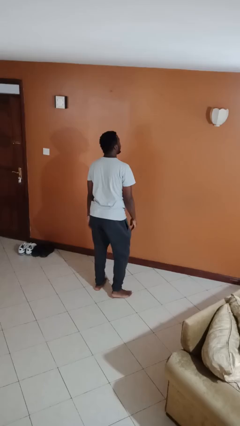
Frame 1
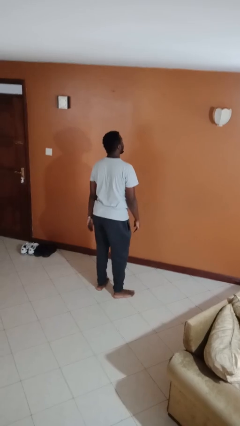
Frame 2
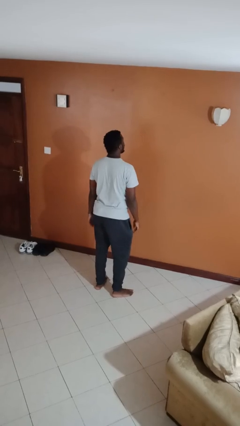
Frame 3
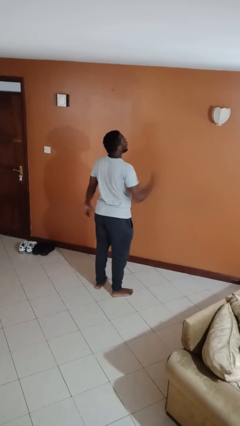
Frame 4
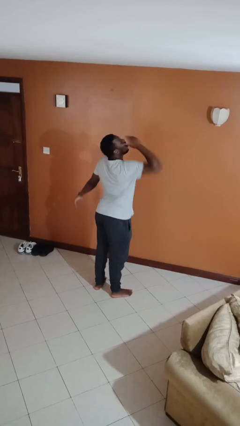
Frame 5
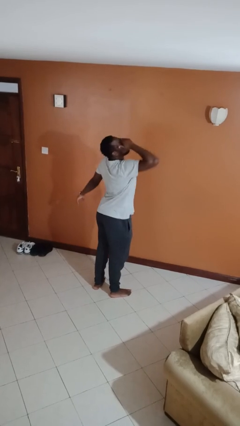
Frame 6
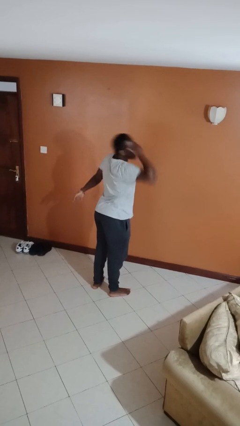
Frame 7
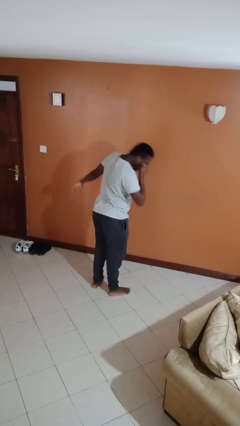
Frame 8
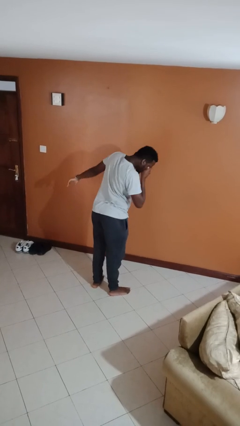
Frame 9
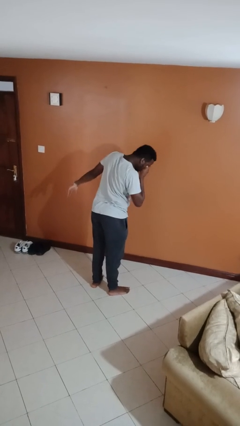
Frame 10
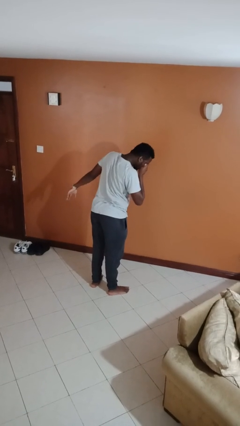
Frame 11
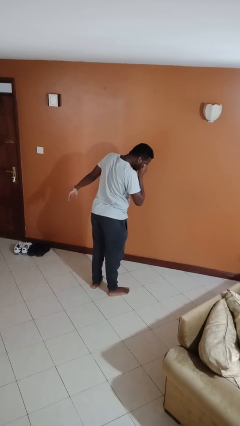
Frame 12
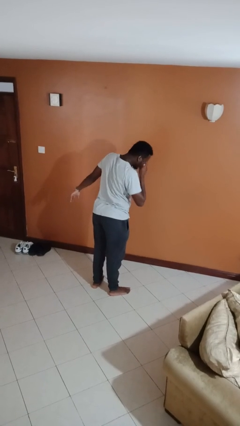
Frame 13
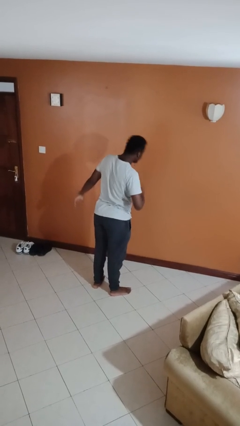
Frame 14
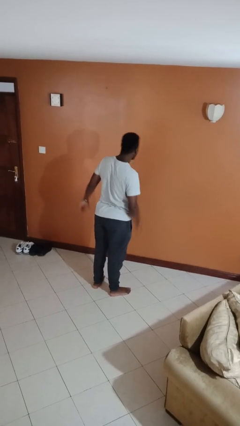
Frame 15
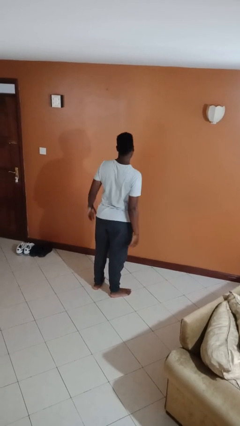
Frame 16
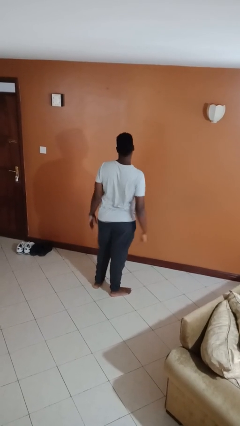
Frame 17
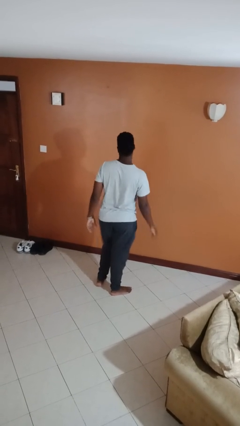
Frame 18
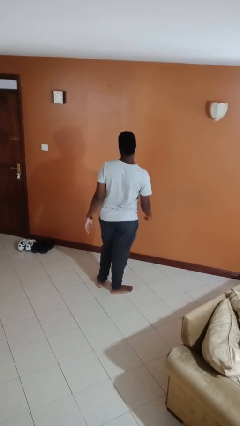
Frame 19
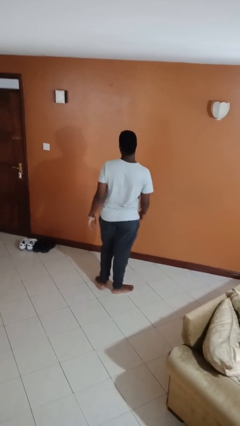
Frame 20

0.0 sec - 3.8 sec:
person sneezes into hand

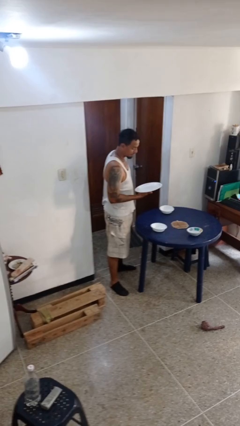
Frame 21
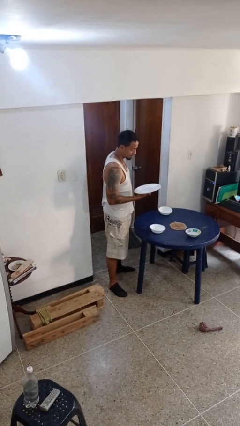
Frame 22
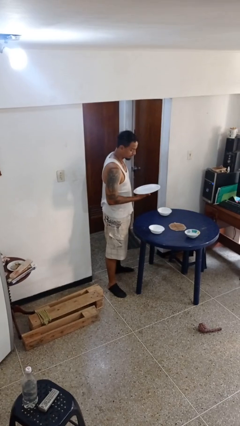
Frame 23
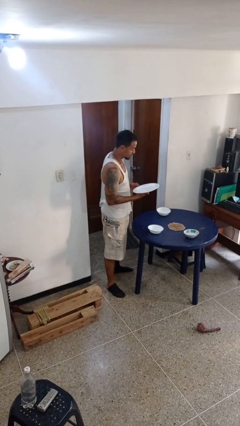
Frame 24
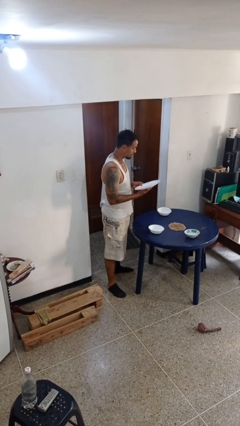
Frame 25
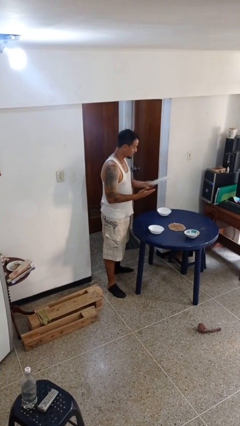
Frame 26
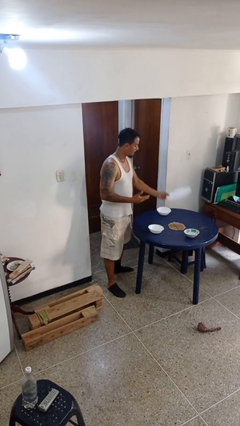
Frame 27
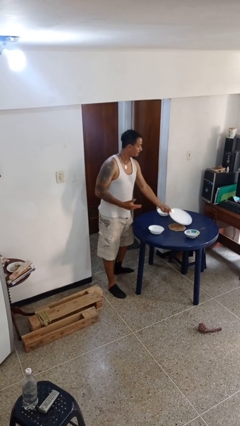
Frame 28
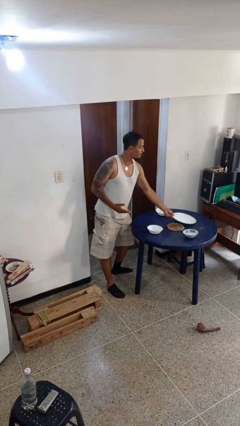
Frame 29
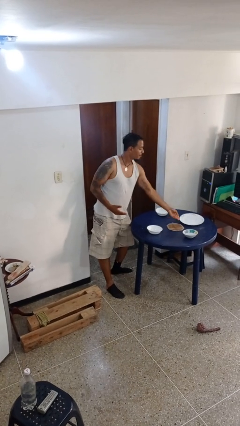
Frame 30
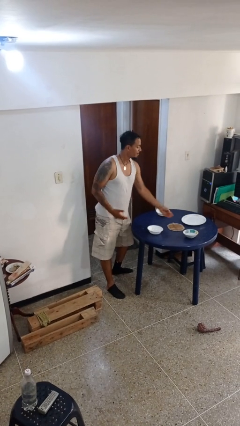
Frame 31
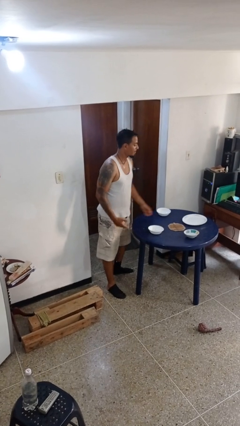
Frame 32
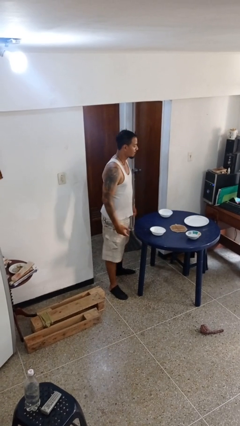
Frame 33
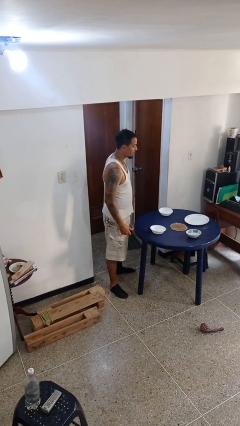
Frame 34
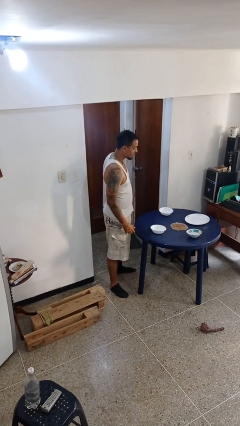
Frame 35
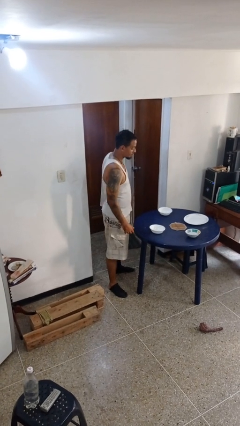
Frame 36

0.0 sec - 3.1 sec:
person sets table

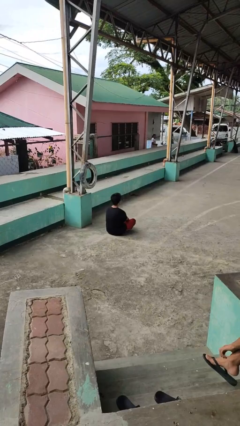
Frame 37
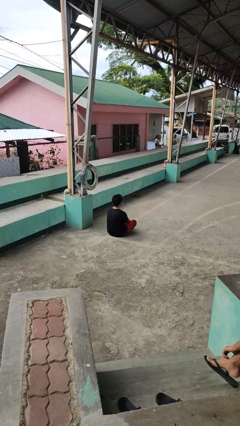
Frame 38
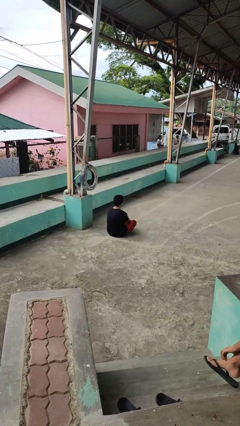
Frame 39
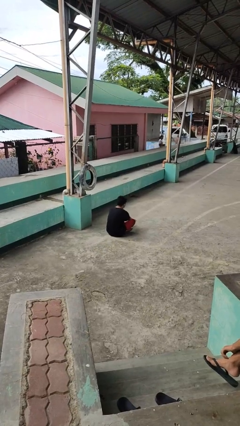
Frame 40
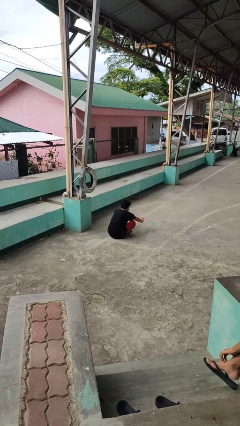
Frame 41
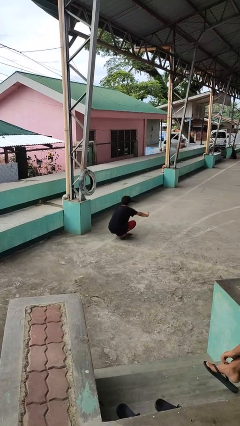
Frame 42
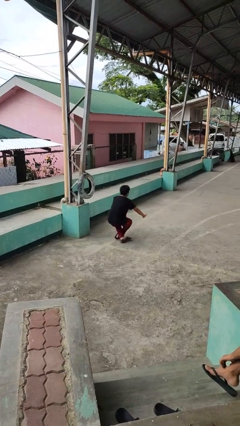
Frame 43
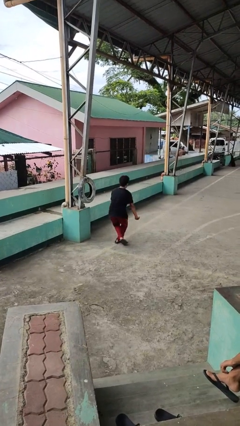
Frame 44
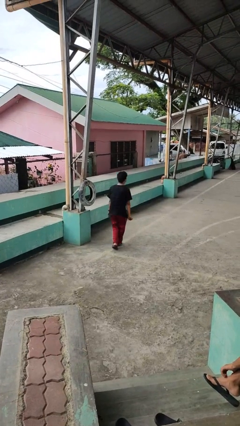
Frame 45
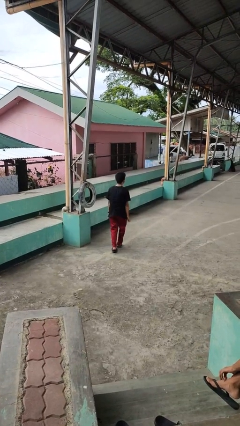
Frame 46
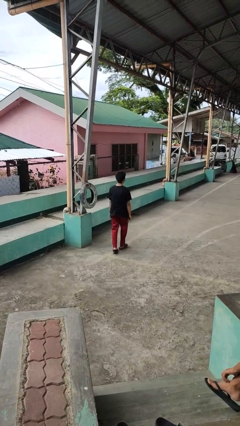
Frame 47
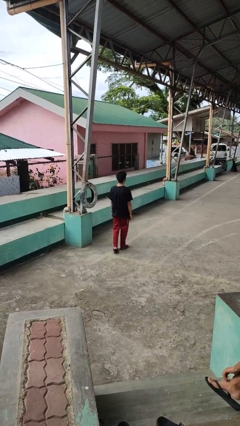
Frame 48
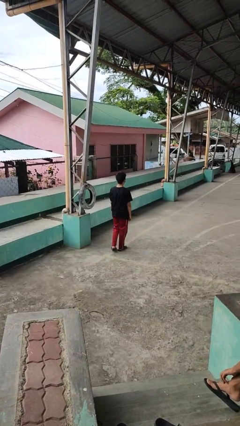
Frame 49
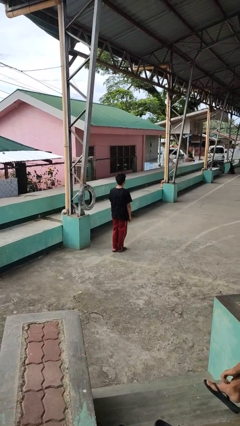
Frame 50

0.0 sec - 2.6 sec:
person stands up from floor

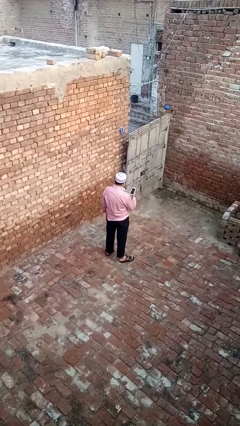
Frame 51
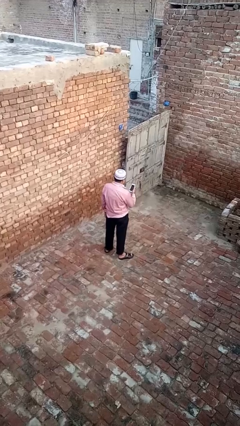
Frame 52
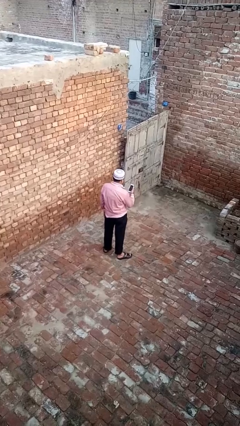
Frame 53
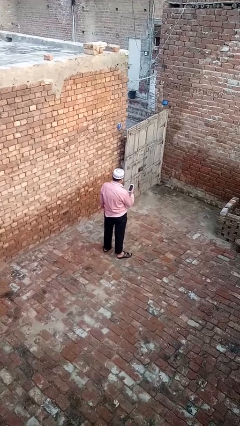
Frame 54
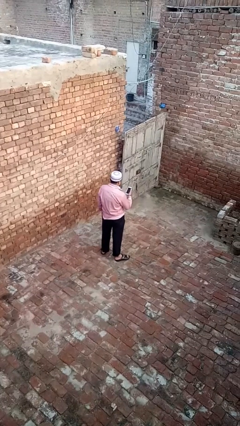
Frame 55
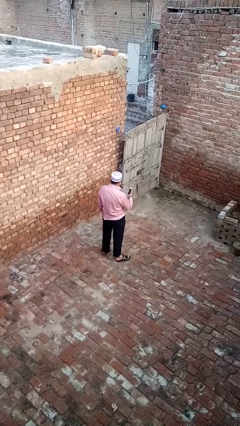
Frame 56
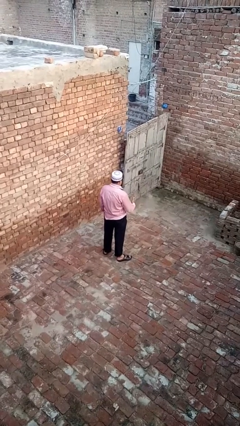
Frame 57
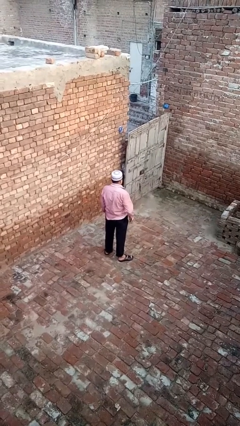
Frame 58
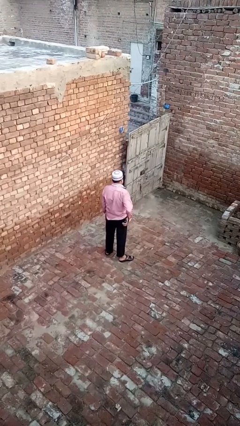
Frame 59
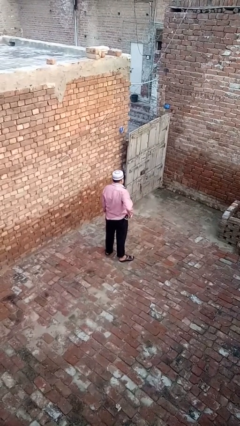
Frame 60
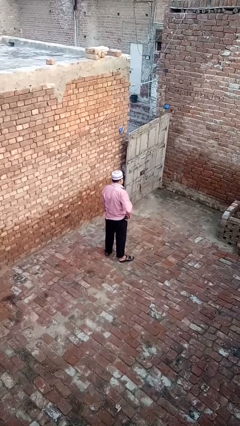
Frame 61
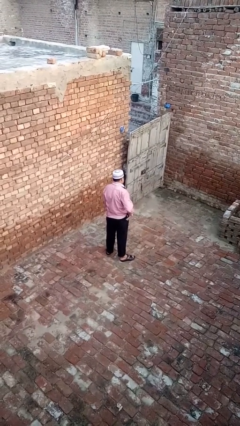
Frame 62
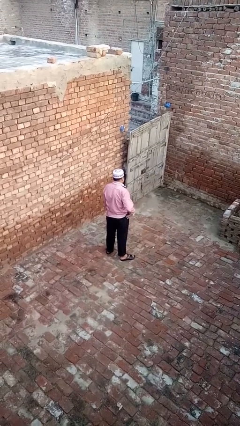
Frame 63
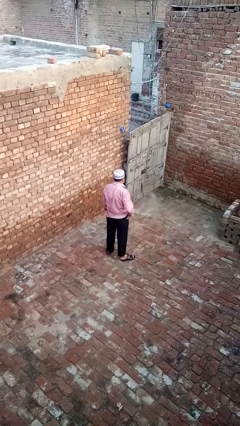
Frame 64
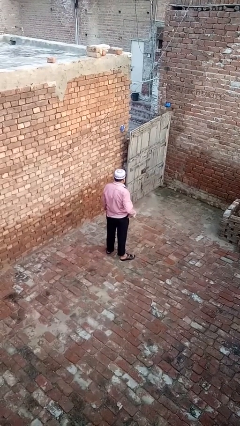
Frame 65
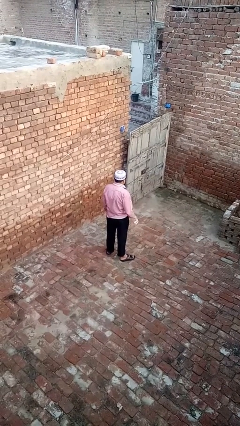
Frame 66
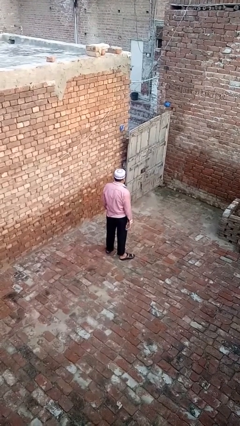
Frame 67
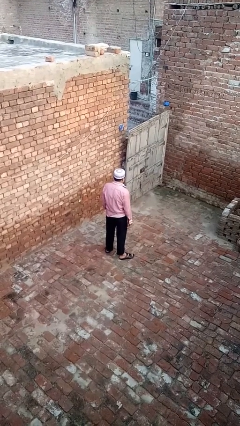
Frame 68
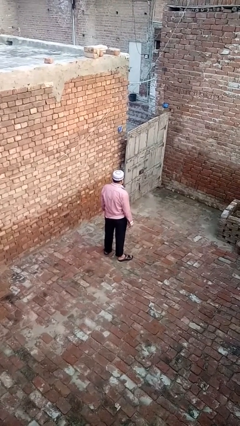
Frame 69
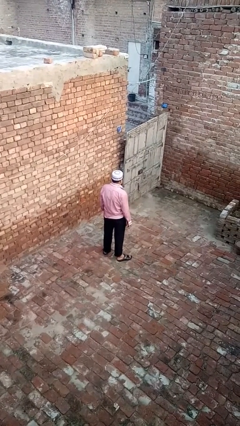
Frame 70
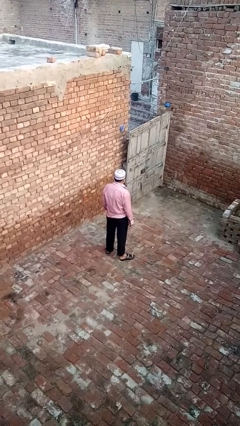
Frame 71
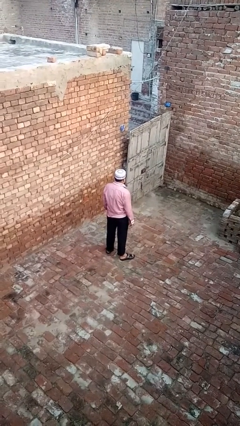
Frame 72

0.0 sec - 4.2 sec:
person puts phone into pocket

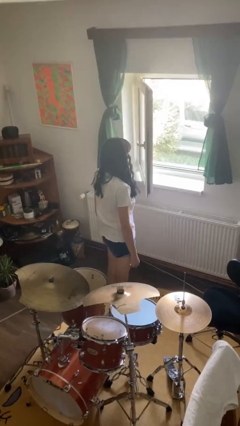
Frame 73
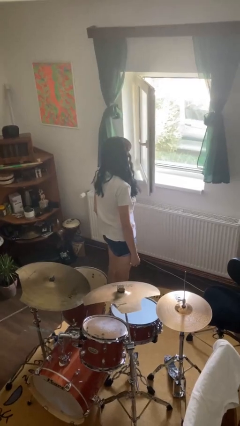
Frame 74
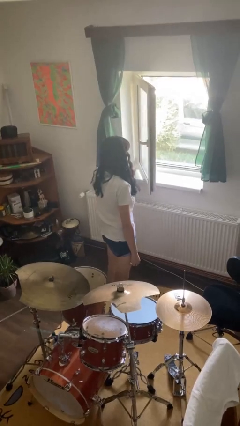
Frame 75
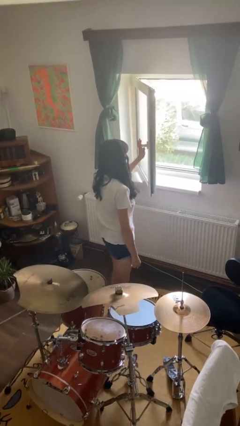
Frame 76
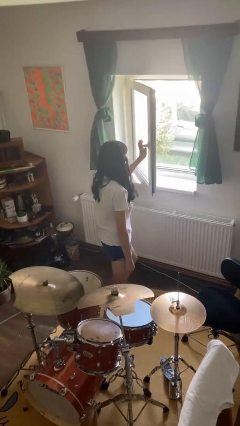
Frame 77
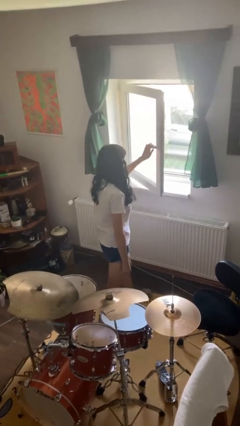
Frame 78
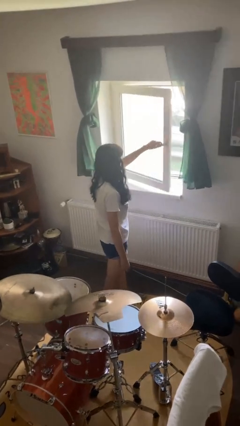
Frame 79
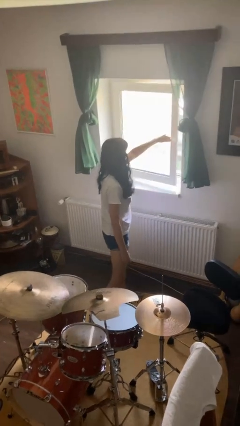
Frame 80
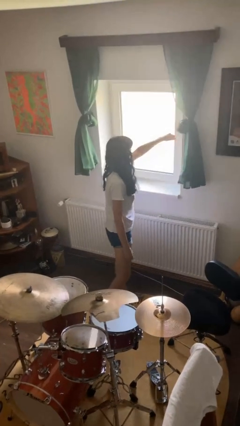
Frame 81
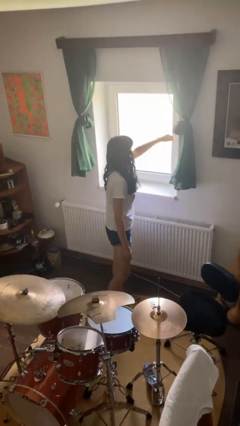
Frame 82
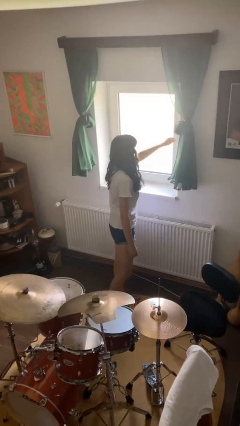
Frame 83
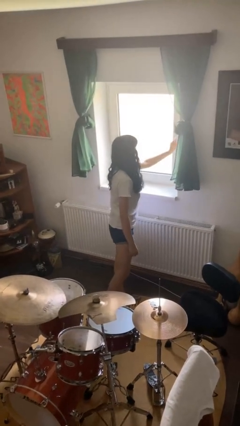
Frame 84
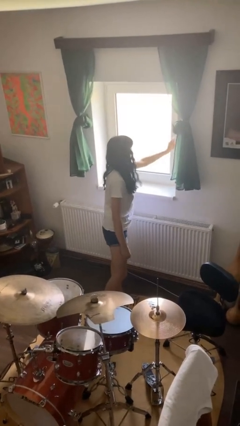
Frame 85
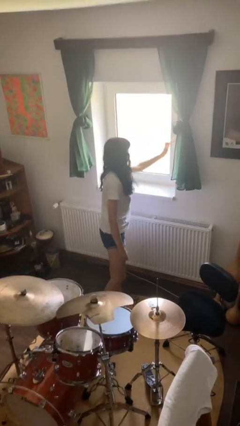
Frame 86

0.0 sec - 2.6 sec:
person closes home window

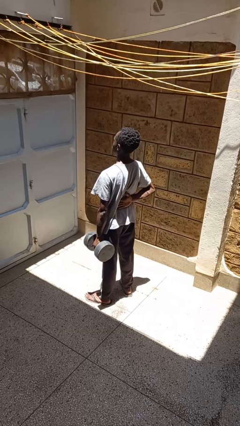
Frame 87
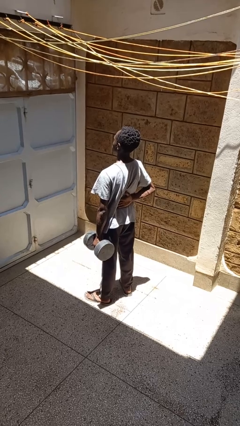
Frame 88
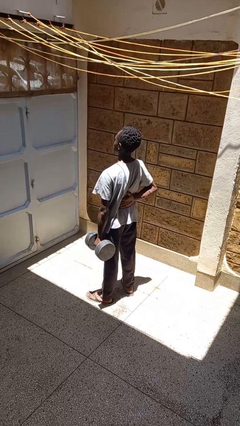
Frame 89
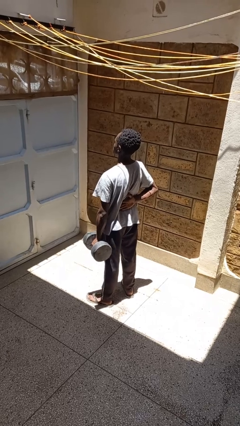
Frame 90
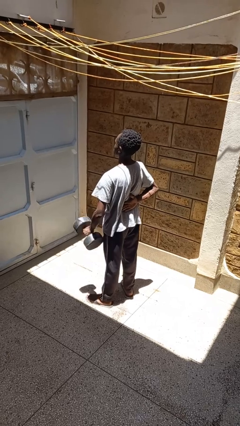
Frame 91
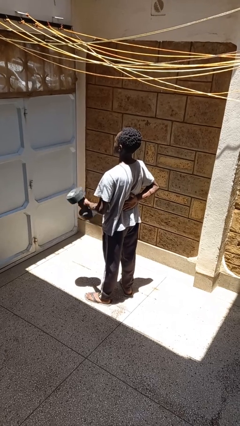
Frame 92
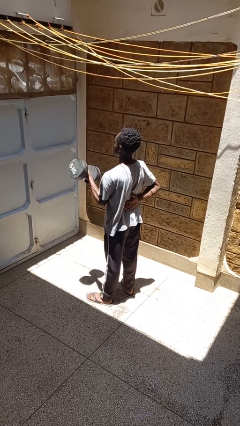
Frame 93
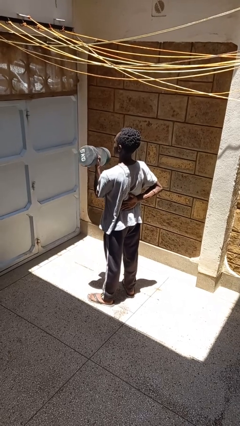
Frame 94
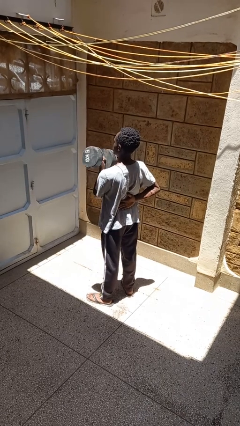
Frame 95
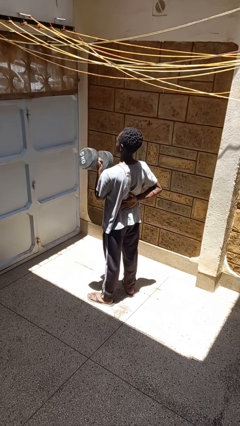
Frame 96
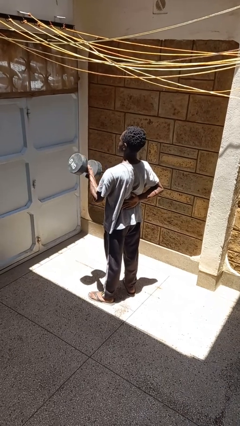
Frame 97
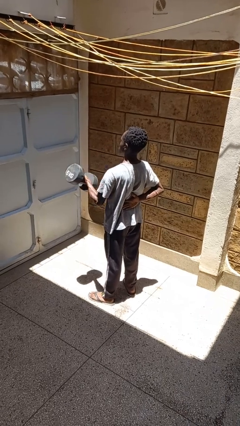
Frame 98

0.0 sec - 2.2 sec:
person lifts dumbbells
